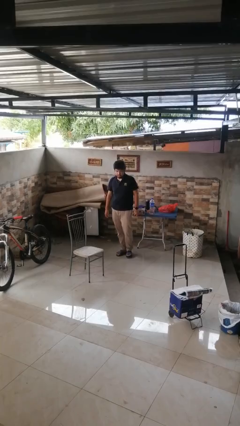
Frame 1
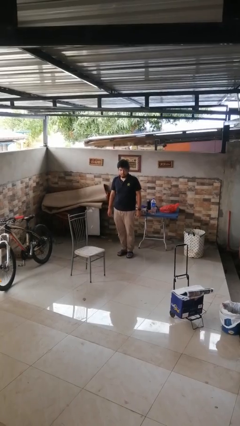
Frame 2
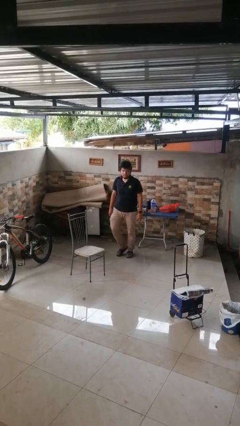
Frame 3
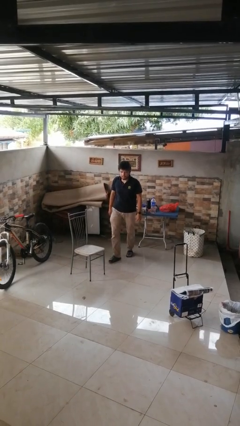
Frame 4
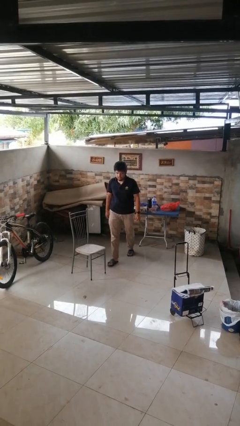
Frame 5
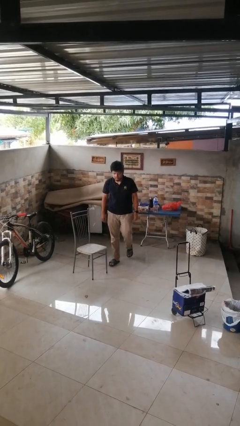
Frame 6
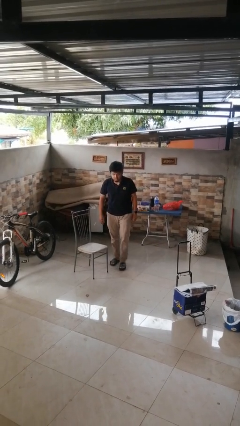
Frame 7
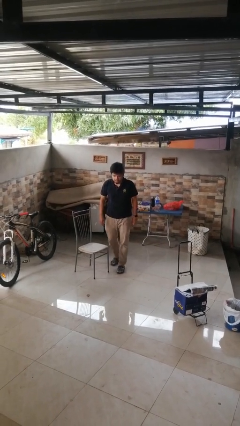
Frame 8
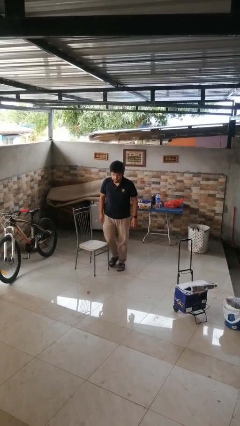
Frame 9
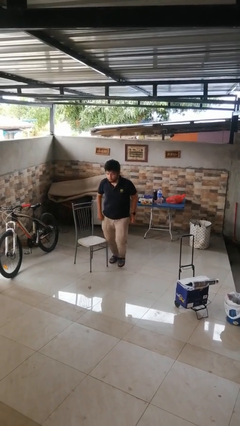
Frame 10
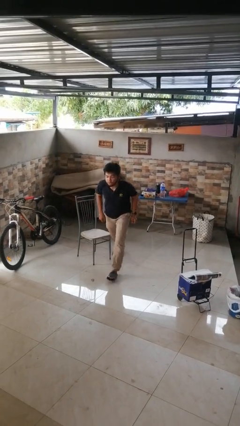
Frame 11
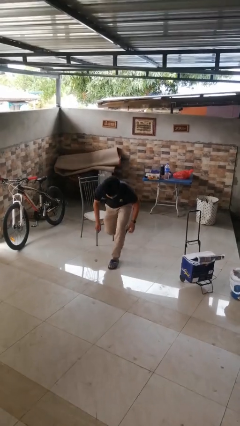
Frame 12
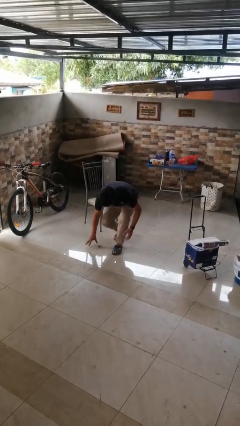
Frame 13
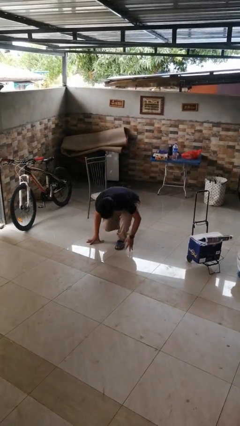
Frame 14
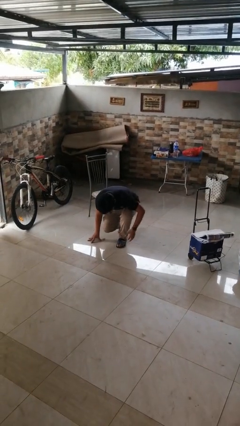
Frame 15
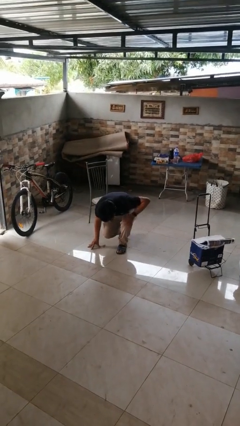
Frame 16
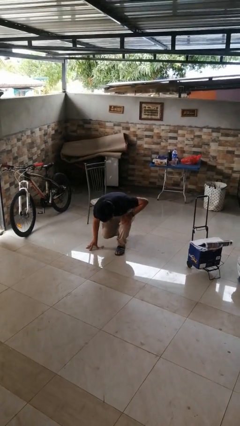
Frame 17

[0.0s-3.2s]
person trips on object on floor

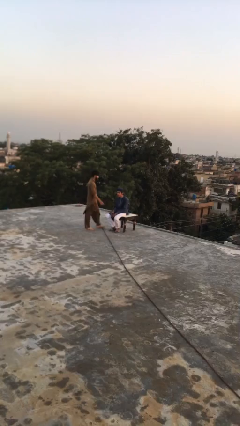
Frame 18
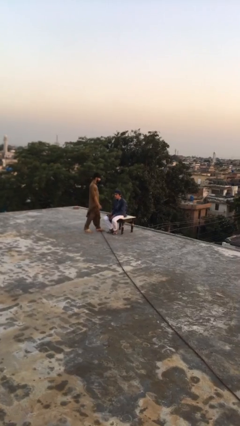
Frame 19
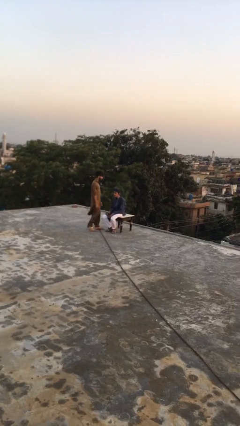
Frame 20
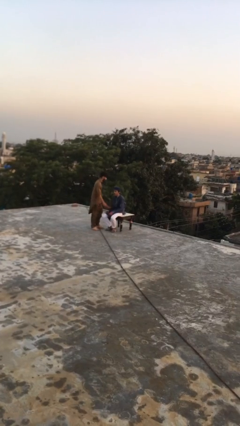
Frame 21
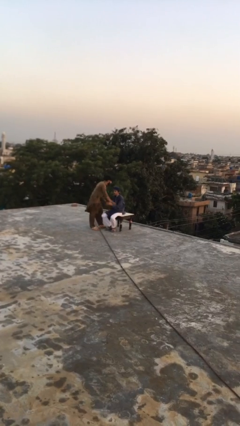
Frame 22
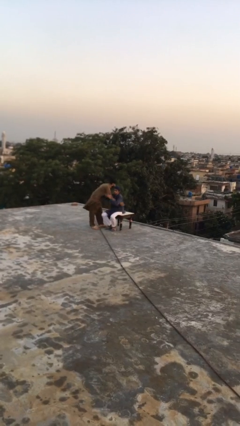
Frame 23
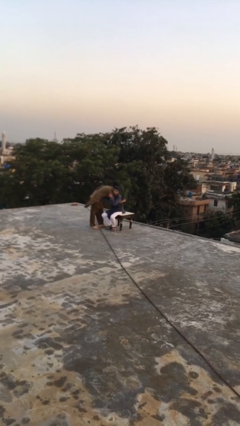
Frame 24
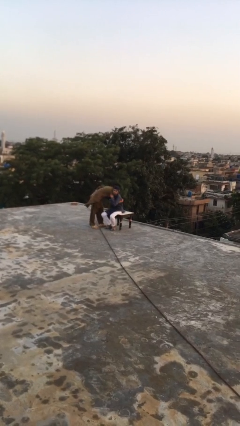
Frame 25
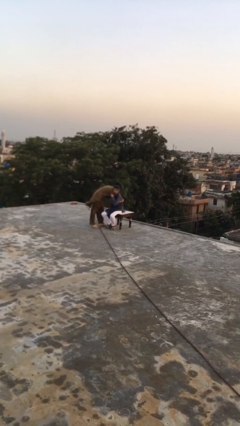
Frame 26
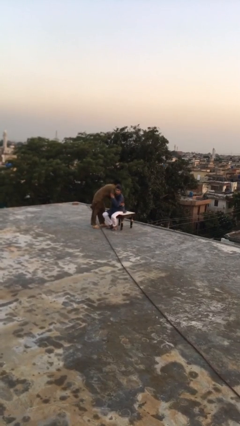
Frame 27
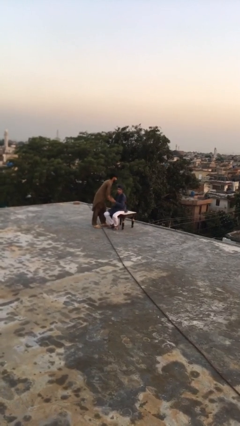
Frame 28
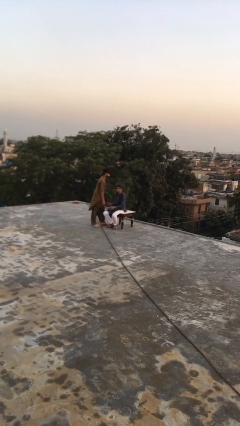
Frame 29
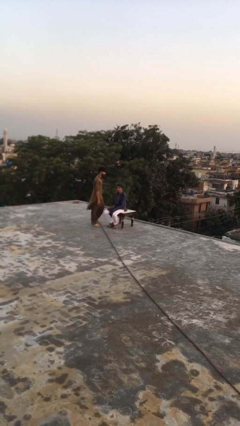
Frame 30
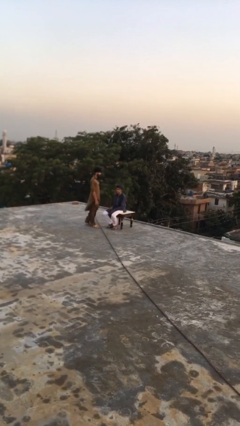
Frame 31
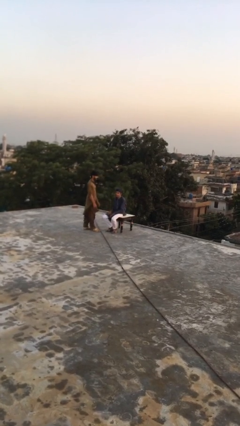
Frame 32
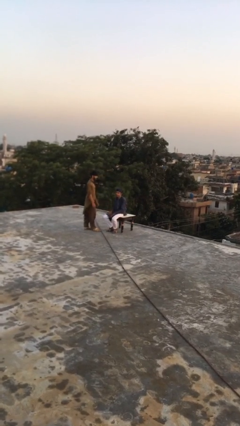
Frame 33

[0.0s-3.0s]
person embraces person

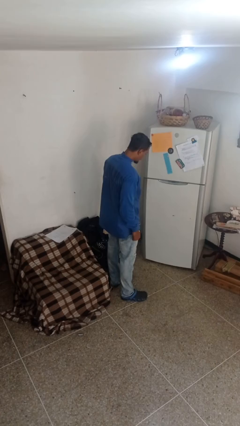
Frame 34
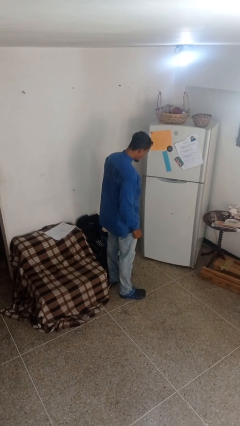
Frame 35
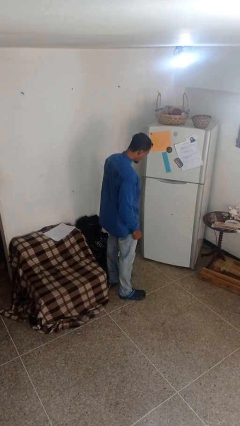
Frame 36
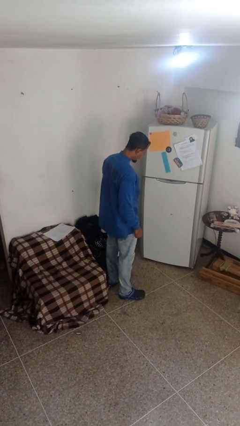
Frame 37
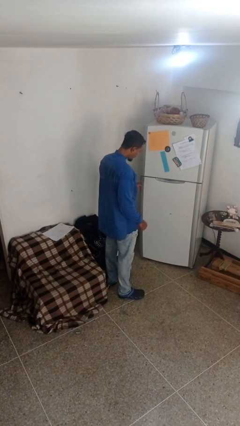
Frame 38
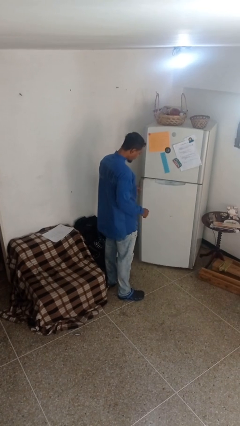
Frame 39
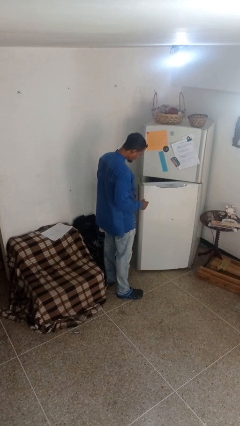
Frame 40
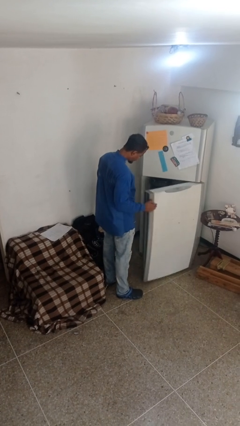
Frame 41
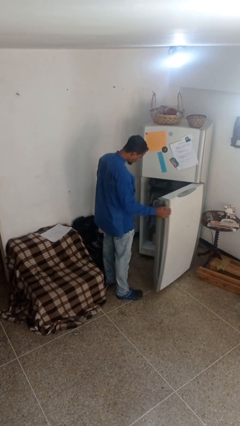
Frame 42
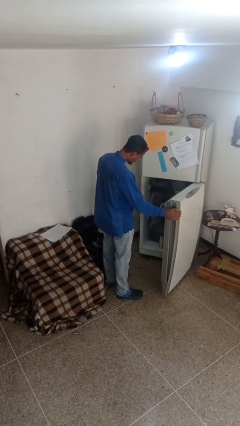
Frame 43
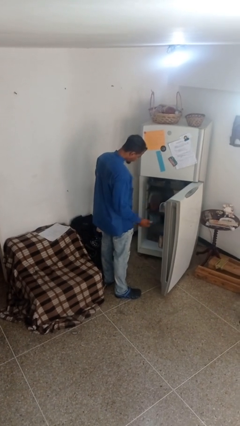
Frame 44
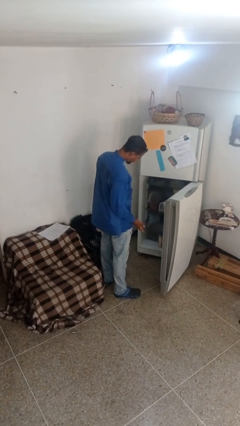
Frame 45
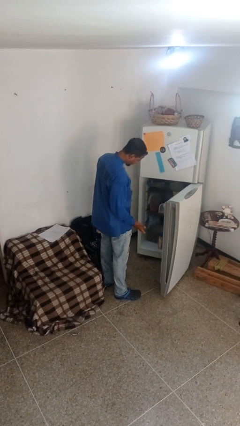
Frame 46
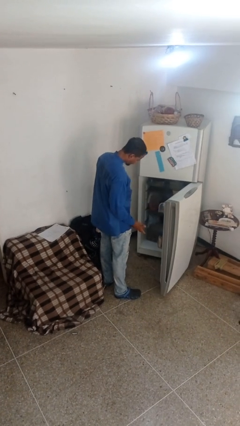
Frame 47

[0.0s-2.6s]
person opens refrigerator

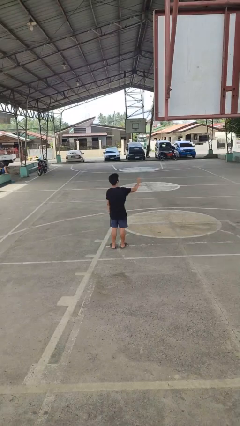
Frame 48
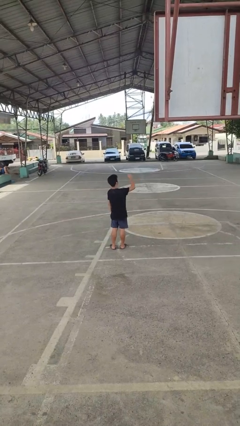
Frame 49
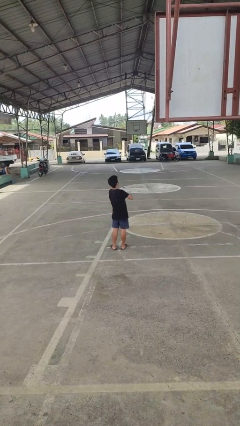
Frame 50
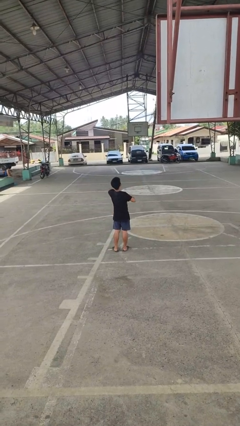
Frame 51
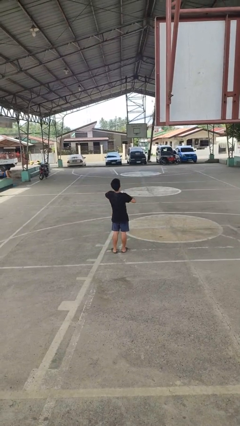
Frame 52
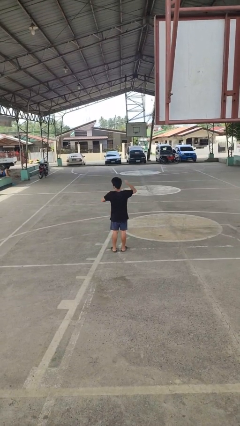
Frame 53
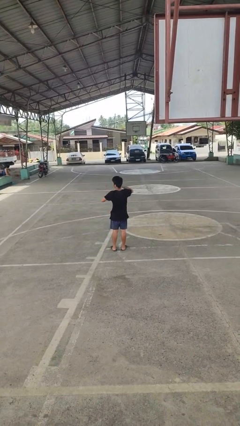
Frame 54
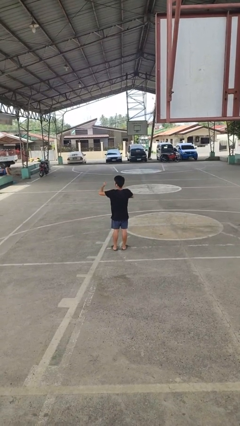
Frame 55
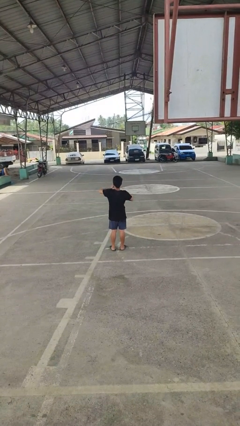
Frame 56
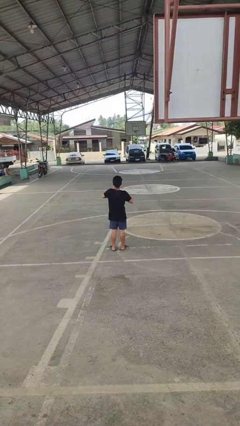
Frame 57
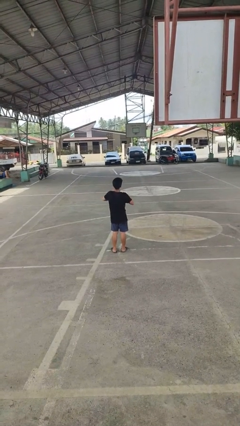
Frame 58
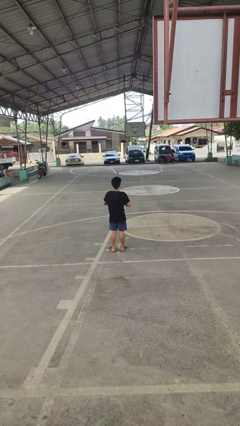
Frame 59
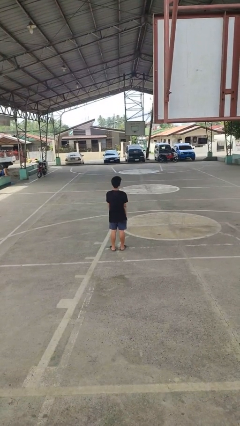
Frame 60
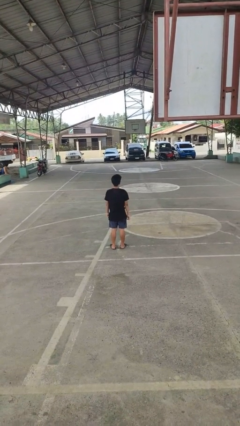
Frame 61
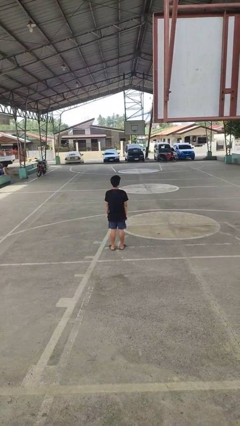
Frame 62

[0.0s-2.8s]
person drums on chest

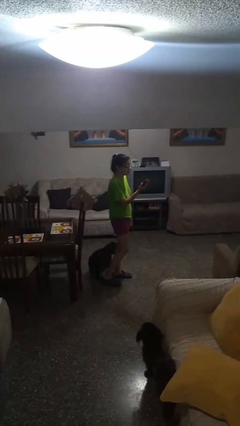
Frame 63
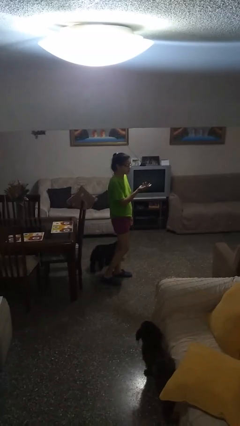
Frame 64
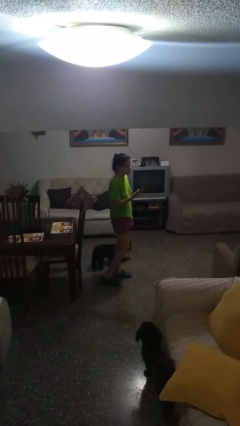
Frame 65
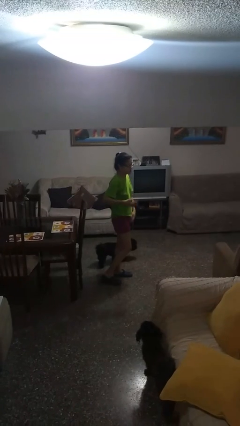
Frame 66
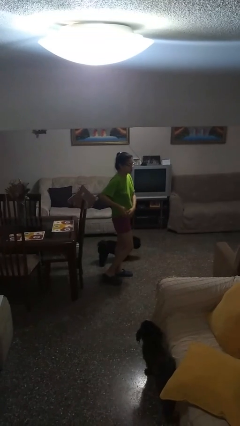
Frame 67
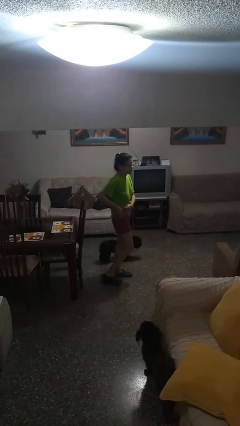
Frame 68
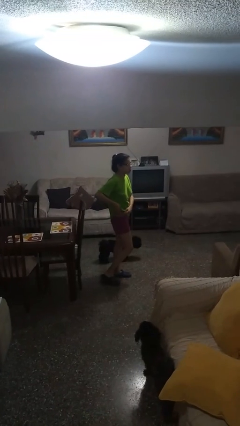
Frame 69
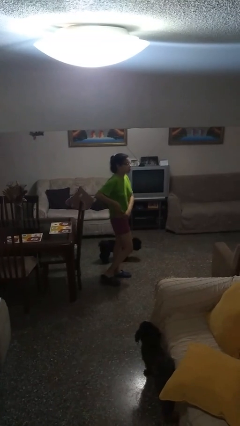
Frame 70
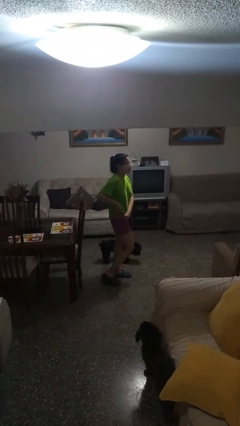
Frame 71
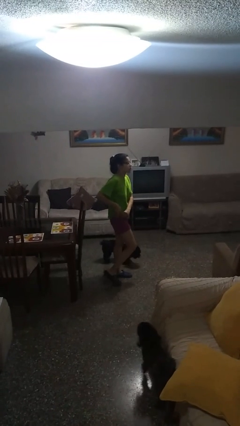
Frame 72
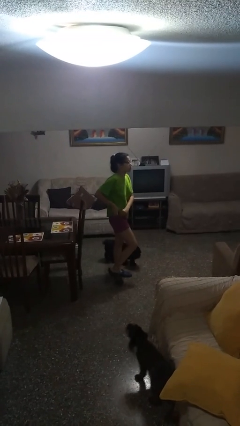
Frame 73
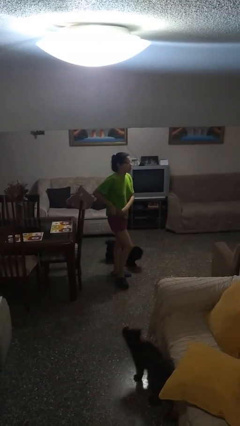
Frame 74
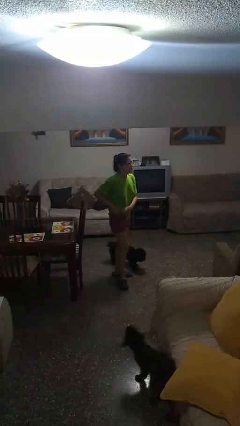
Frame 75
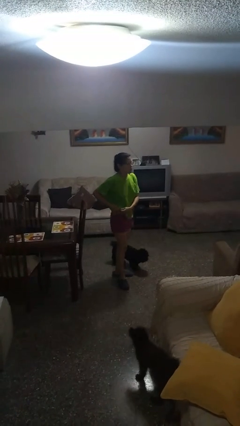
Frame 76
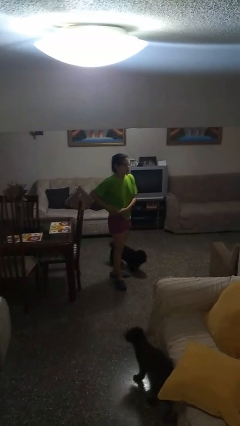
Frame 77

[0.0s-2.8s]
person puts phone into pocket

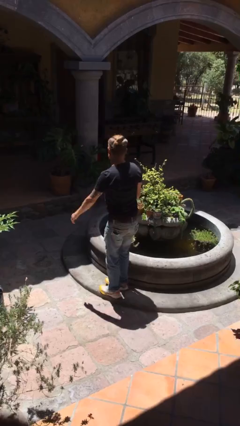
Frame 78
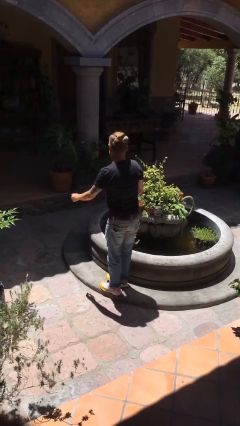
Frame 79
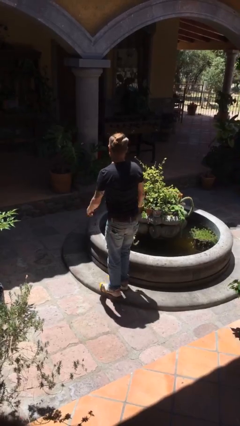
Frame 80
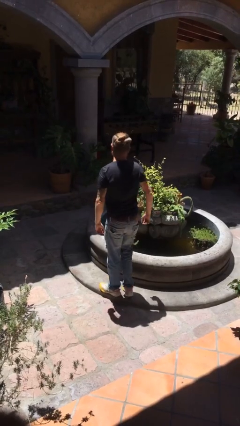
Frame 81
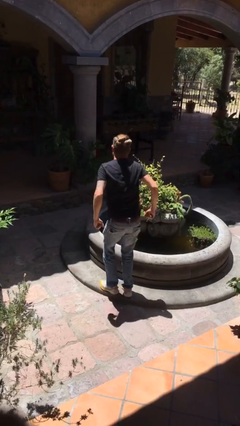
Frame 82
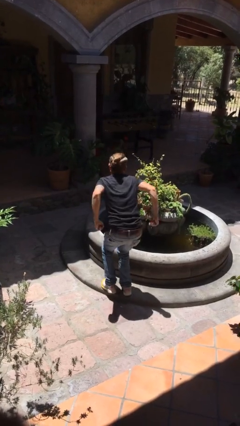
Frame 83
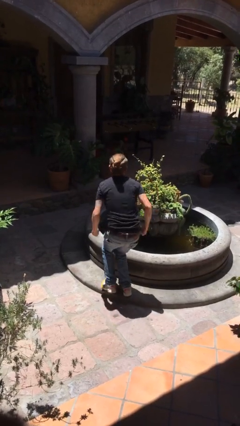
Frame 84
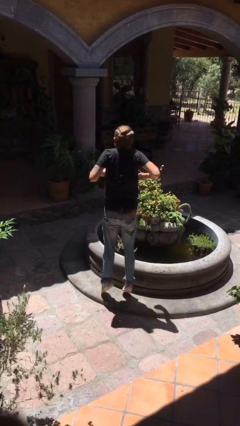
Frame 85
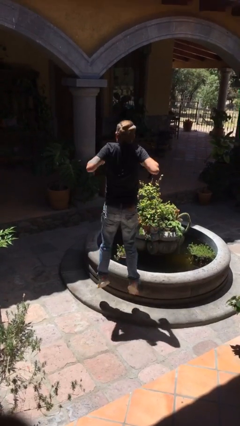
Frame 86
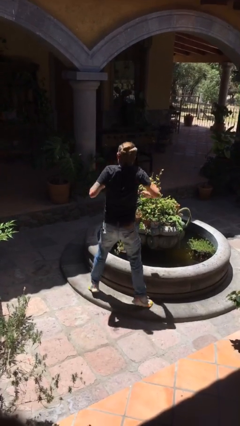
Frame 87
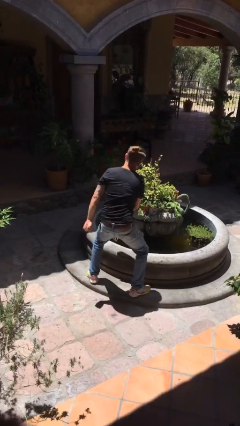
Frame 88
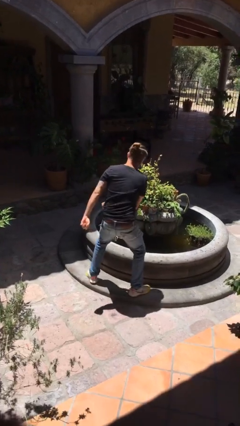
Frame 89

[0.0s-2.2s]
person jumps

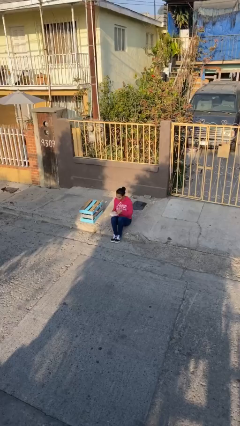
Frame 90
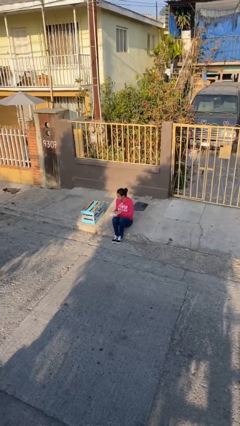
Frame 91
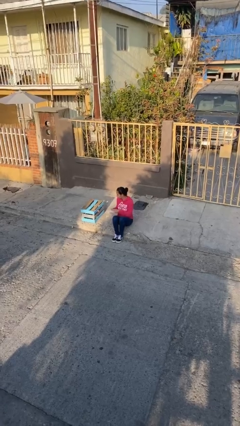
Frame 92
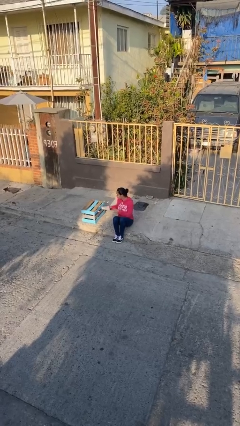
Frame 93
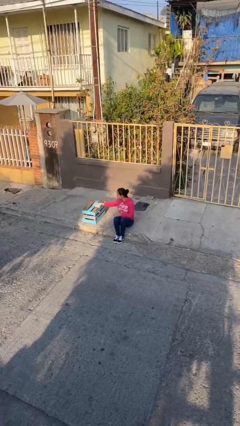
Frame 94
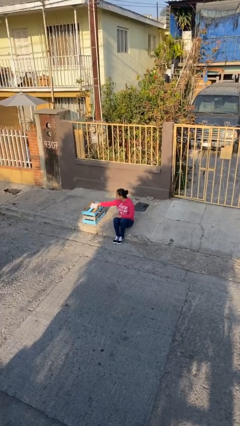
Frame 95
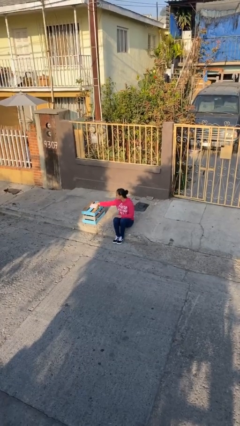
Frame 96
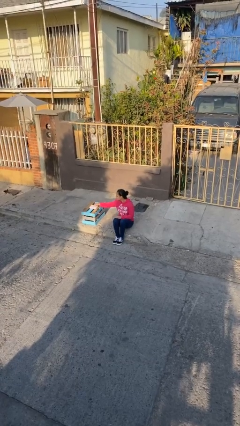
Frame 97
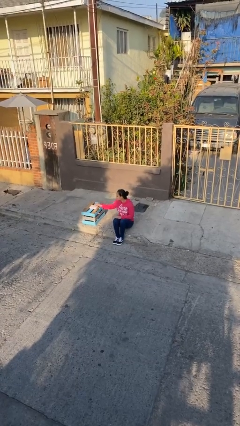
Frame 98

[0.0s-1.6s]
person puts down object on table
